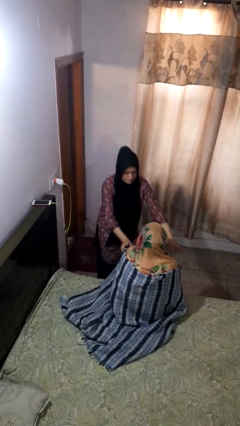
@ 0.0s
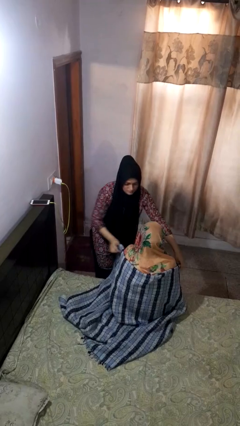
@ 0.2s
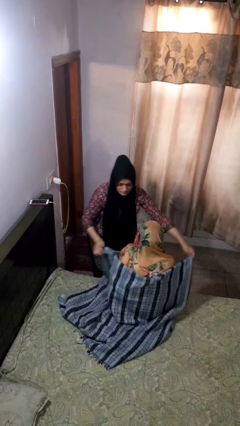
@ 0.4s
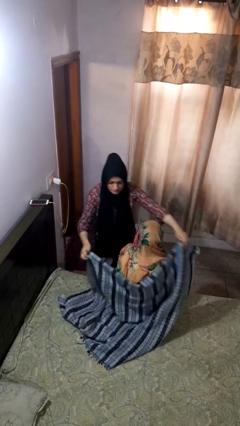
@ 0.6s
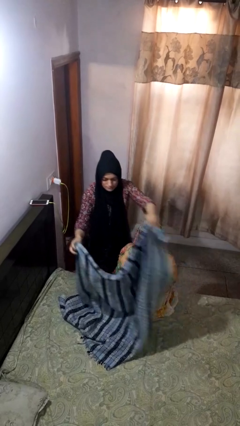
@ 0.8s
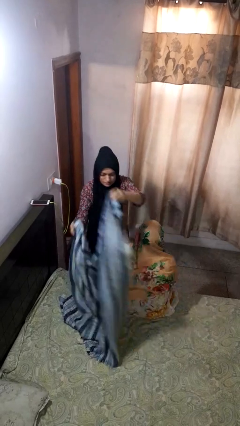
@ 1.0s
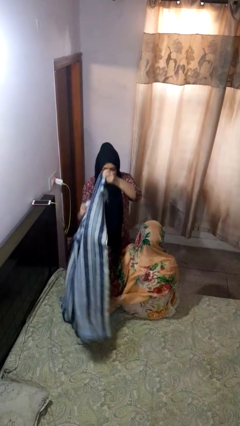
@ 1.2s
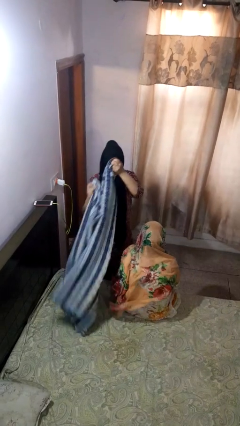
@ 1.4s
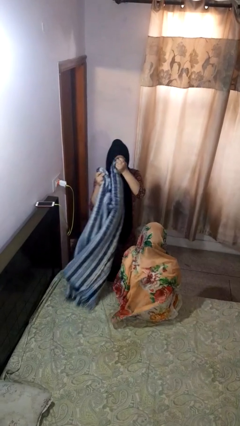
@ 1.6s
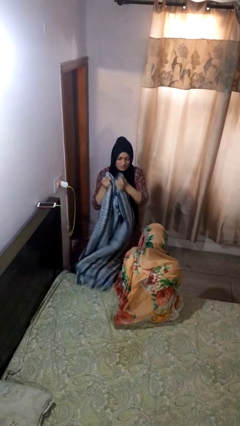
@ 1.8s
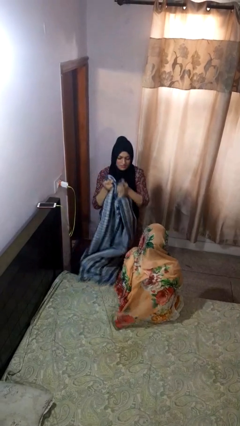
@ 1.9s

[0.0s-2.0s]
person uncovers friend with blanket

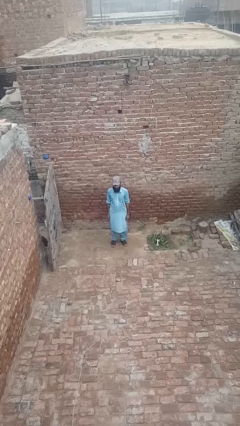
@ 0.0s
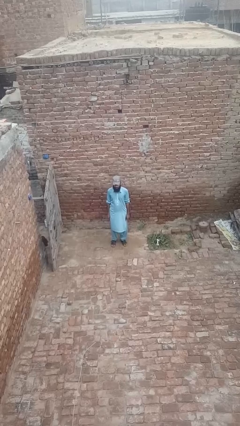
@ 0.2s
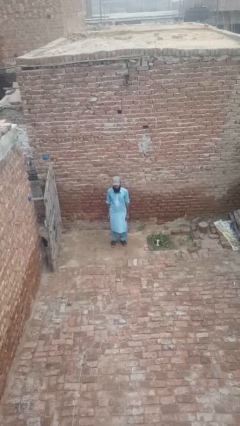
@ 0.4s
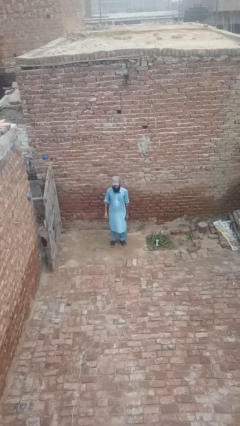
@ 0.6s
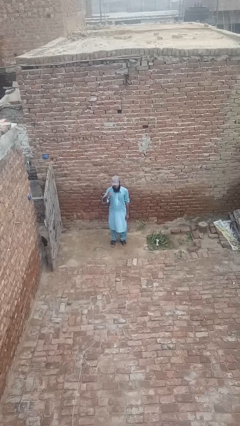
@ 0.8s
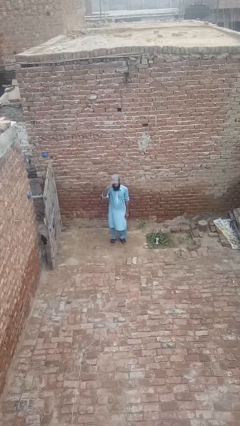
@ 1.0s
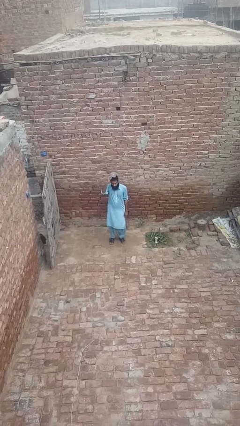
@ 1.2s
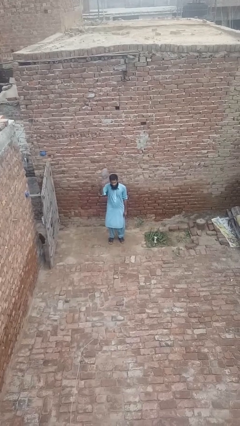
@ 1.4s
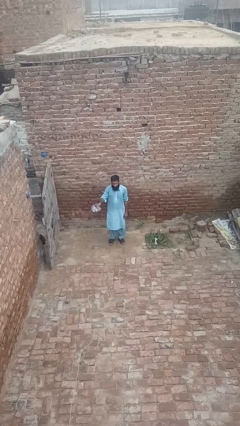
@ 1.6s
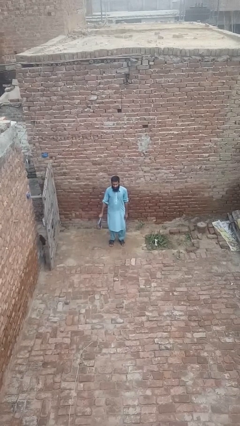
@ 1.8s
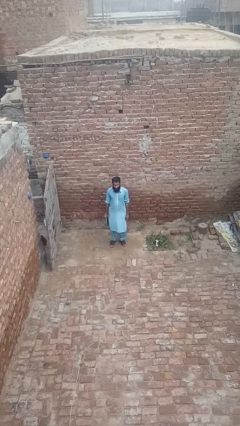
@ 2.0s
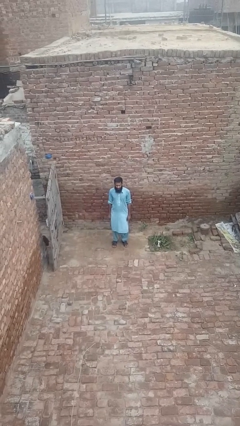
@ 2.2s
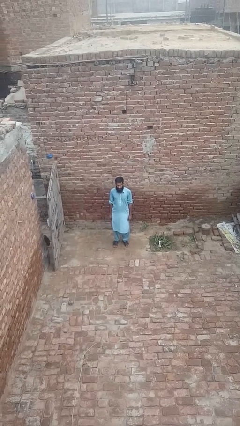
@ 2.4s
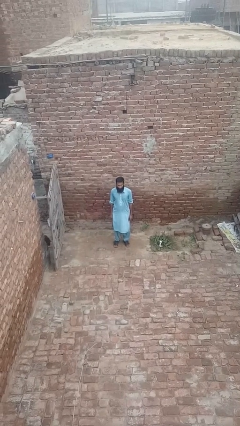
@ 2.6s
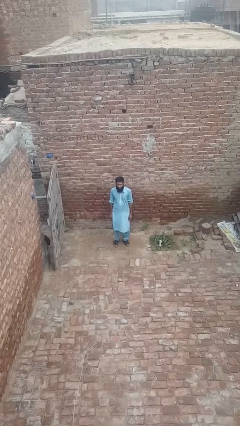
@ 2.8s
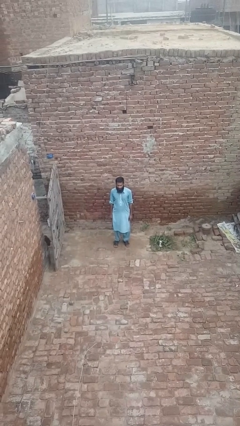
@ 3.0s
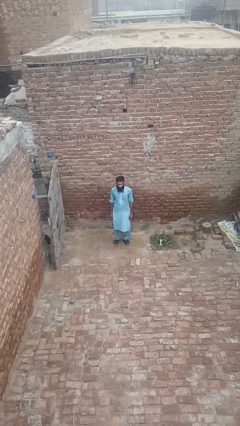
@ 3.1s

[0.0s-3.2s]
person takes off hat

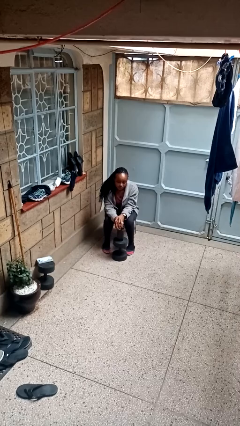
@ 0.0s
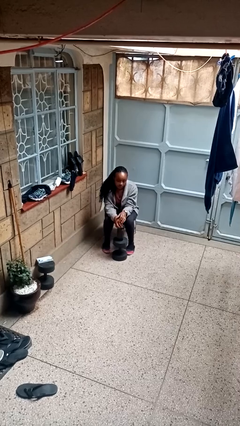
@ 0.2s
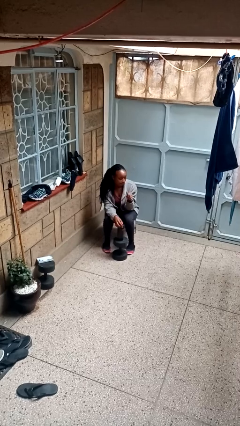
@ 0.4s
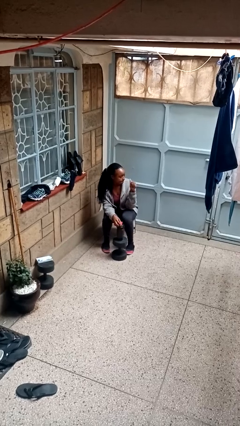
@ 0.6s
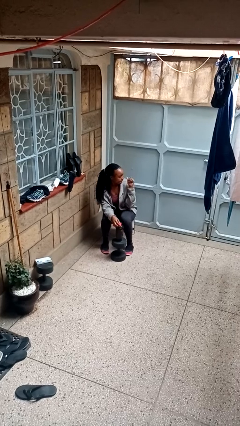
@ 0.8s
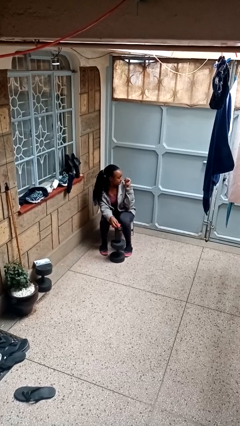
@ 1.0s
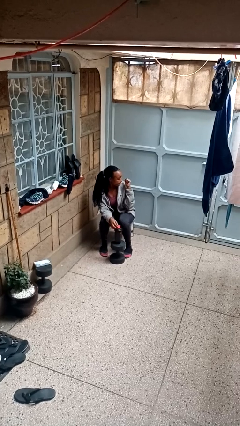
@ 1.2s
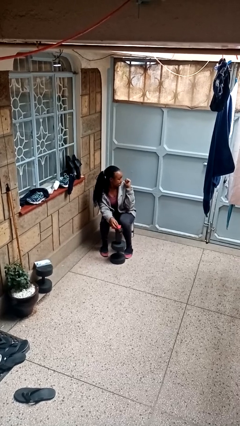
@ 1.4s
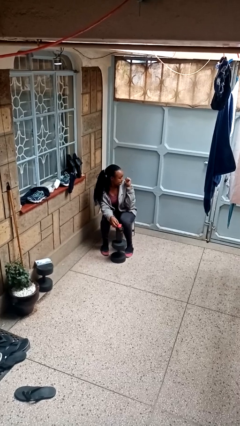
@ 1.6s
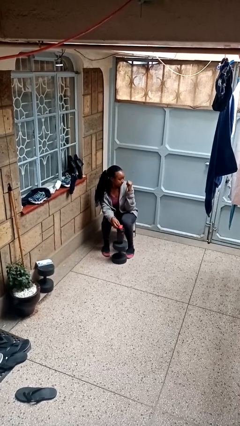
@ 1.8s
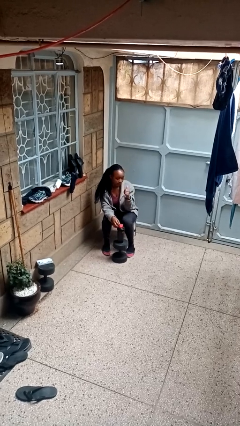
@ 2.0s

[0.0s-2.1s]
person gestures behind me

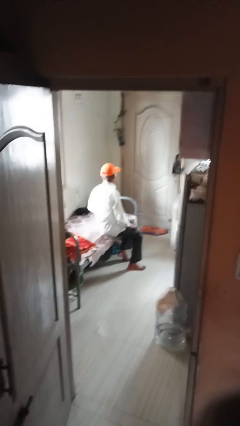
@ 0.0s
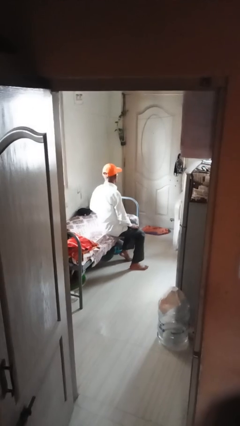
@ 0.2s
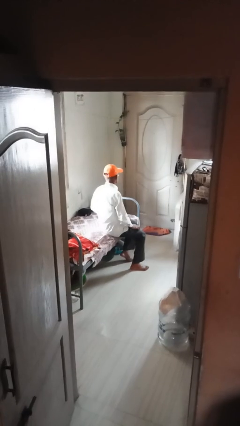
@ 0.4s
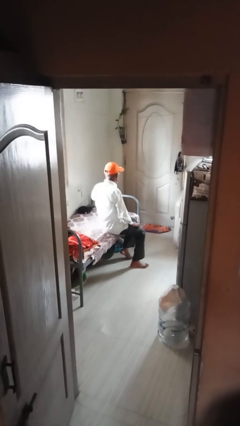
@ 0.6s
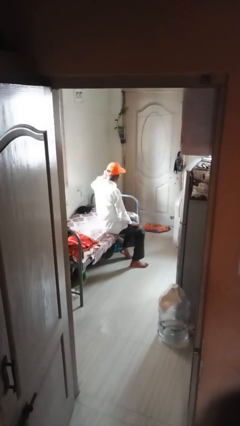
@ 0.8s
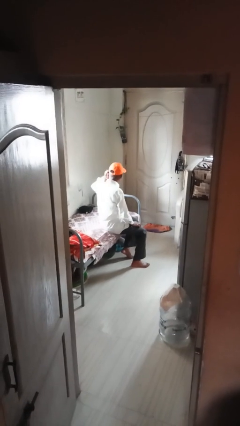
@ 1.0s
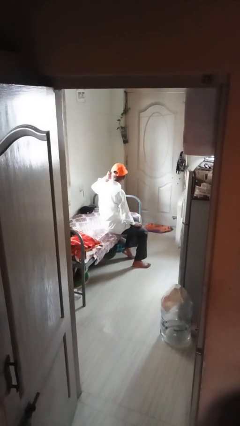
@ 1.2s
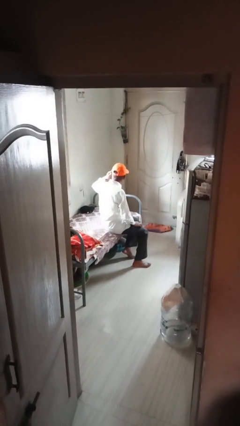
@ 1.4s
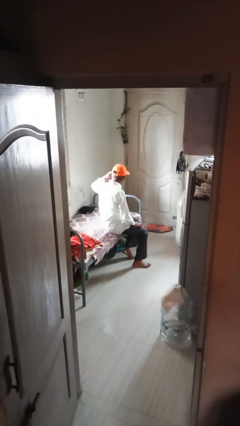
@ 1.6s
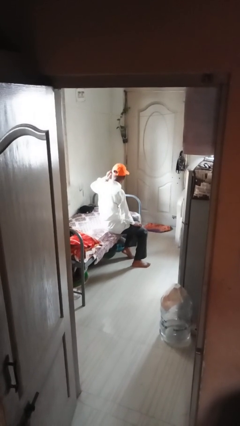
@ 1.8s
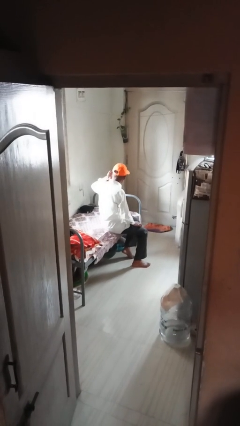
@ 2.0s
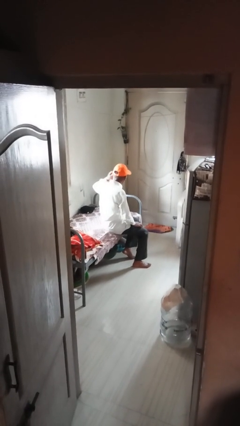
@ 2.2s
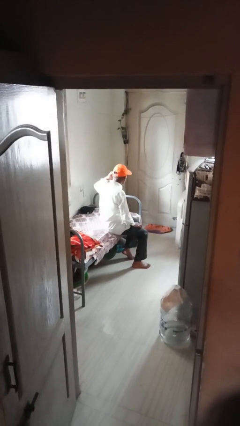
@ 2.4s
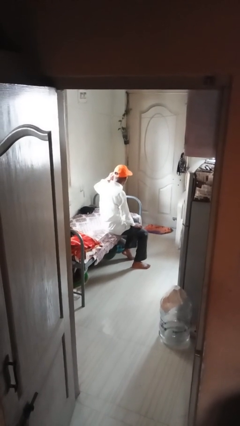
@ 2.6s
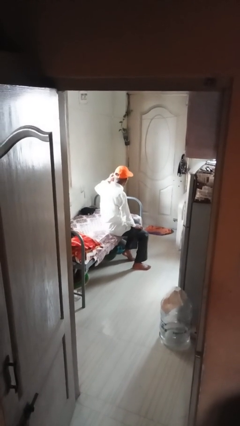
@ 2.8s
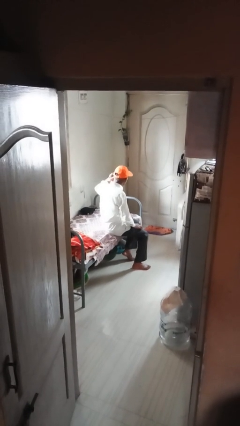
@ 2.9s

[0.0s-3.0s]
person touches earlobe

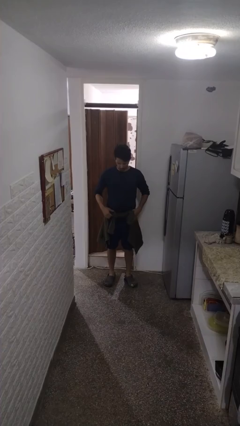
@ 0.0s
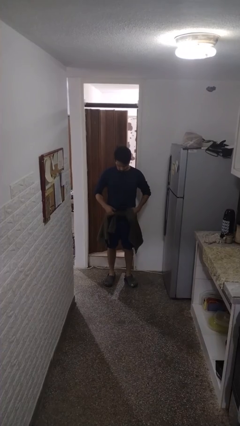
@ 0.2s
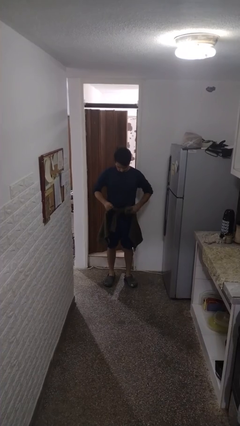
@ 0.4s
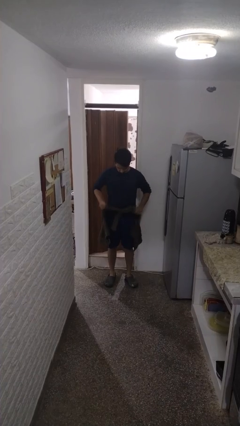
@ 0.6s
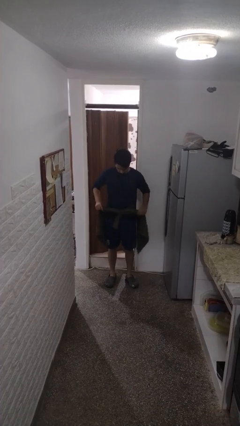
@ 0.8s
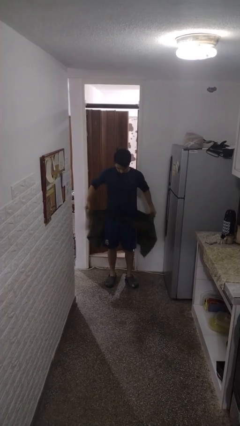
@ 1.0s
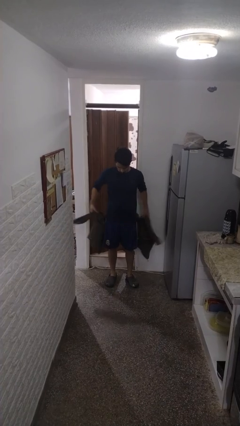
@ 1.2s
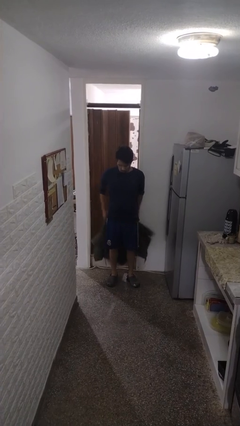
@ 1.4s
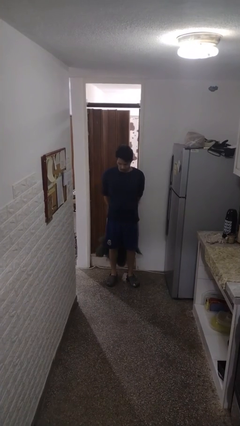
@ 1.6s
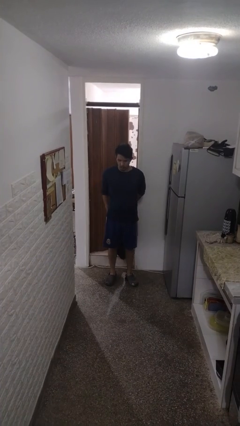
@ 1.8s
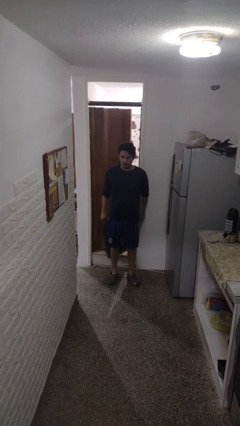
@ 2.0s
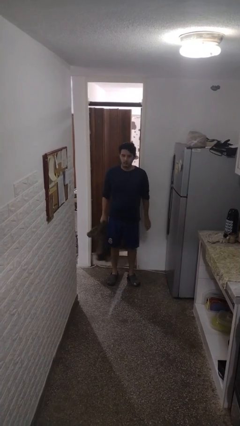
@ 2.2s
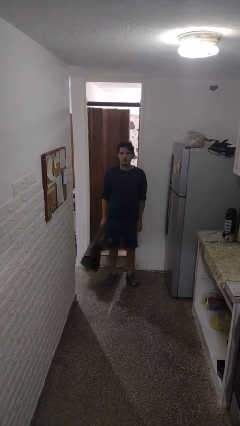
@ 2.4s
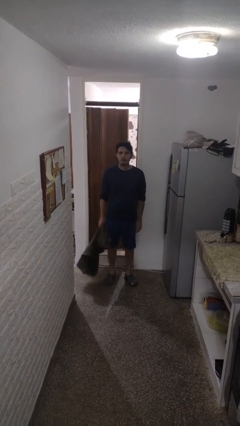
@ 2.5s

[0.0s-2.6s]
person unties jacket around waist

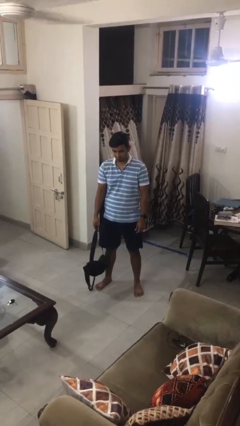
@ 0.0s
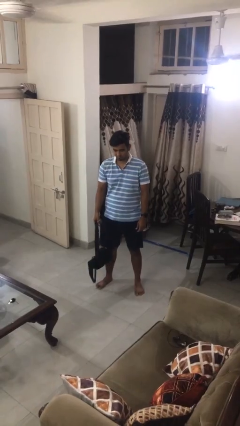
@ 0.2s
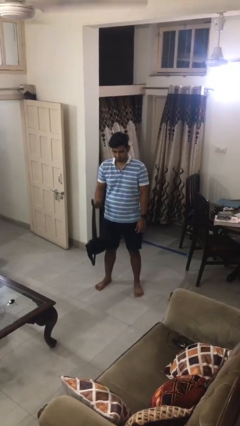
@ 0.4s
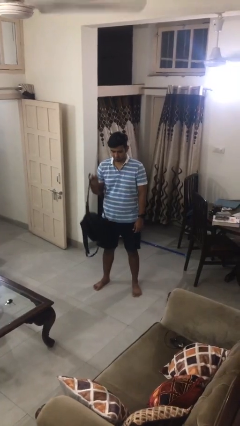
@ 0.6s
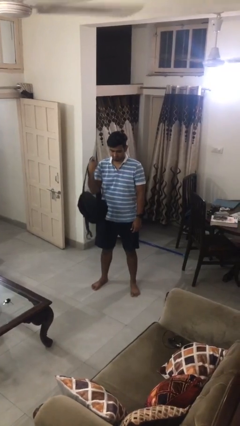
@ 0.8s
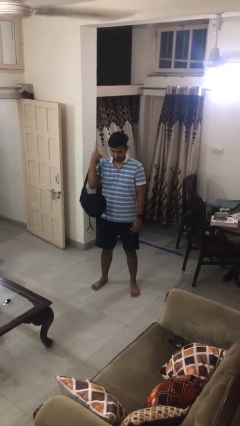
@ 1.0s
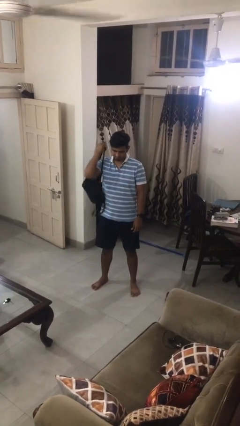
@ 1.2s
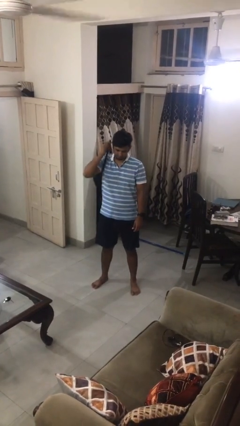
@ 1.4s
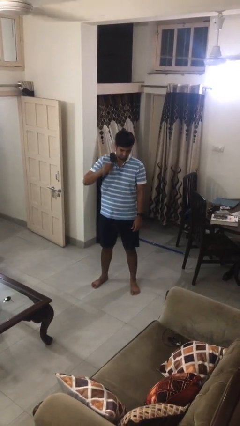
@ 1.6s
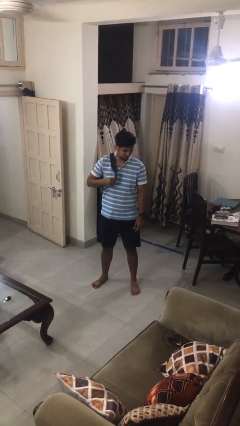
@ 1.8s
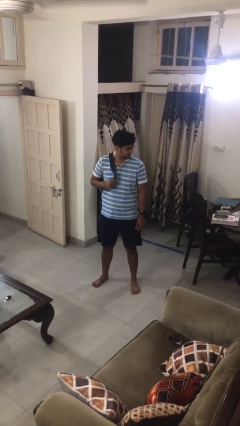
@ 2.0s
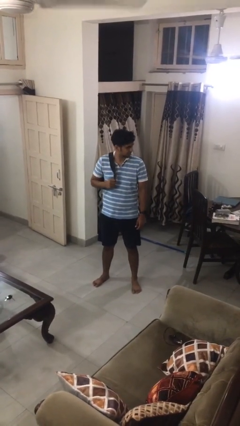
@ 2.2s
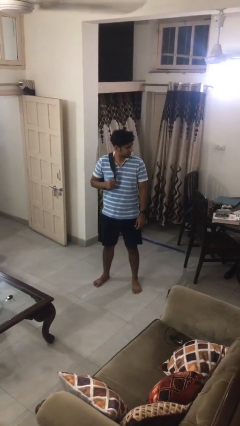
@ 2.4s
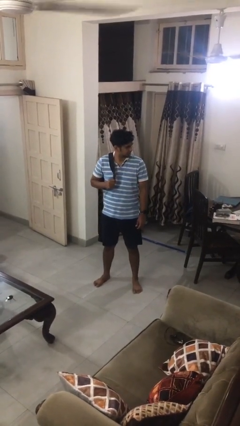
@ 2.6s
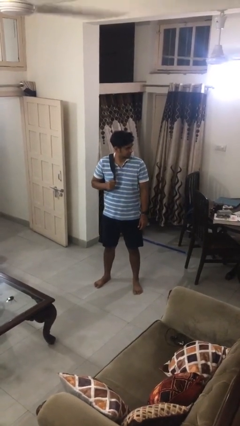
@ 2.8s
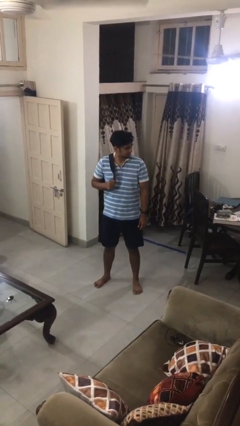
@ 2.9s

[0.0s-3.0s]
person puts on backpack

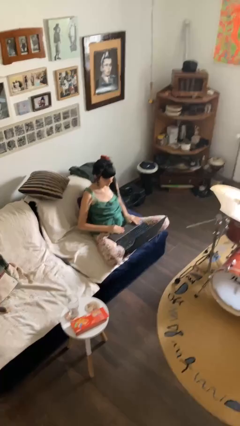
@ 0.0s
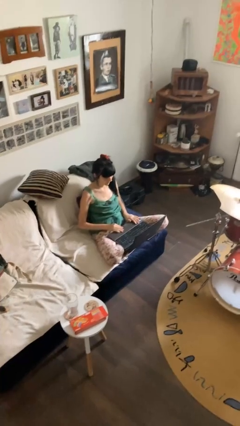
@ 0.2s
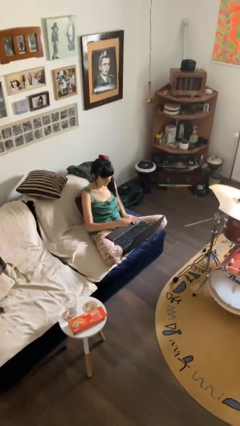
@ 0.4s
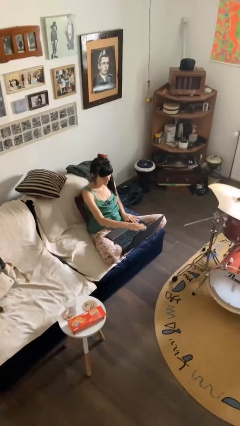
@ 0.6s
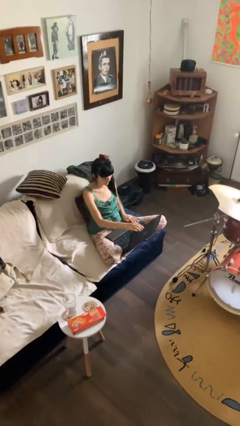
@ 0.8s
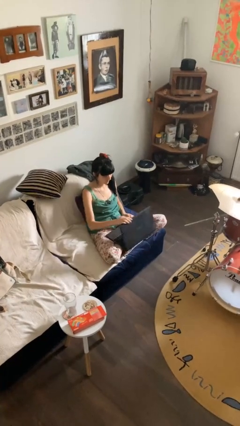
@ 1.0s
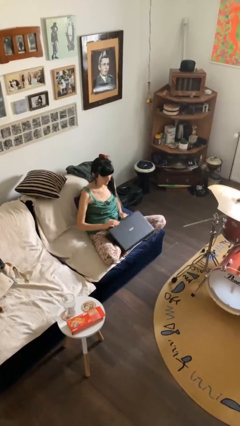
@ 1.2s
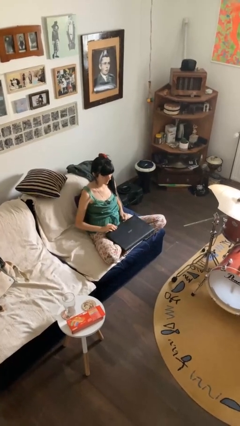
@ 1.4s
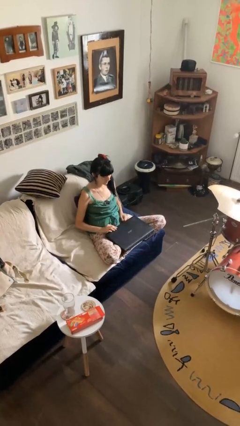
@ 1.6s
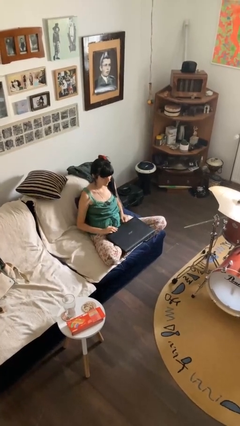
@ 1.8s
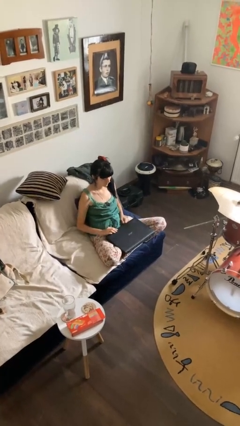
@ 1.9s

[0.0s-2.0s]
person closes laptop
